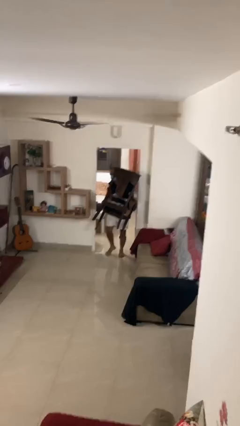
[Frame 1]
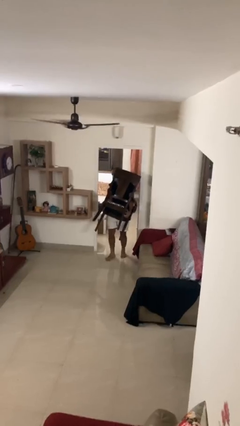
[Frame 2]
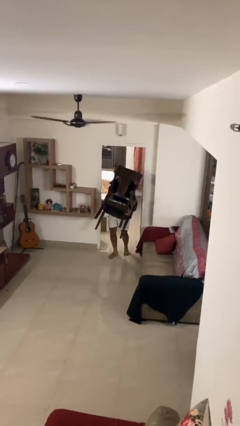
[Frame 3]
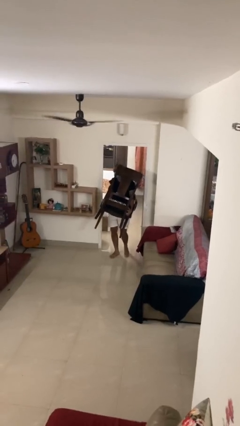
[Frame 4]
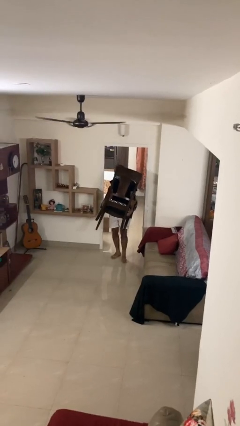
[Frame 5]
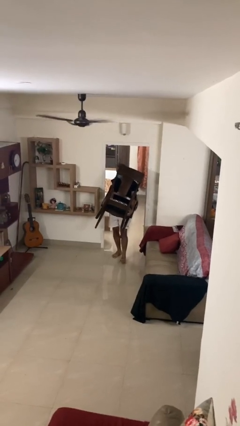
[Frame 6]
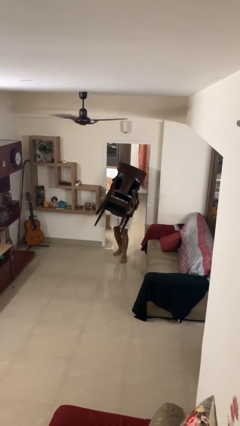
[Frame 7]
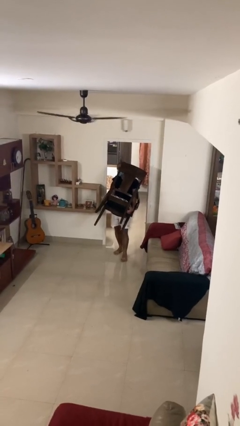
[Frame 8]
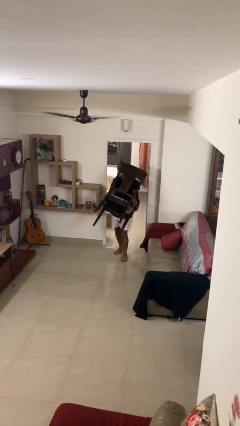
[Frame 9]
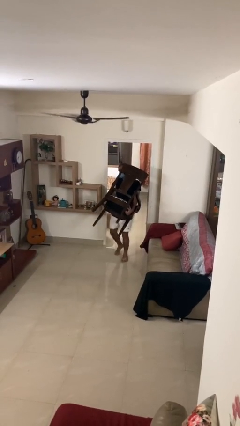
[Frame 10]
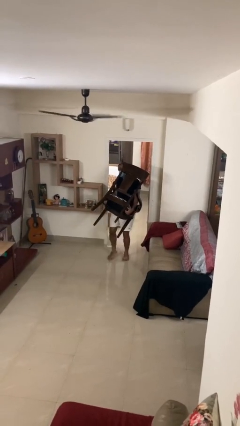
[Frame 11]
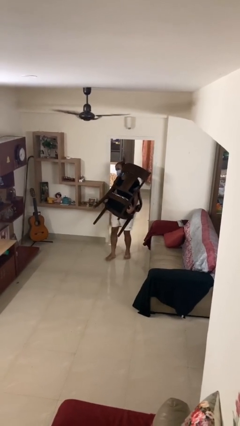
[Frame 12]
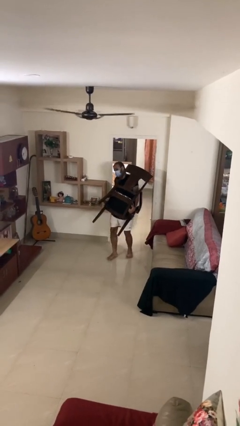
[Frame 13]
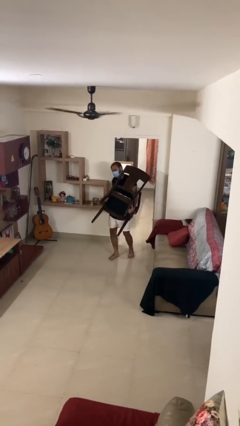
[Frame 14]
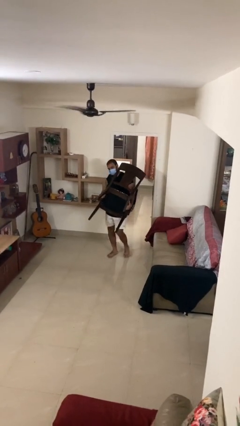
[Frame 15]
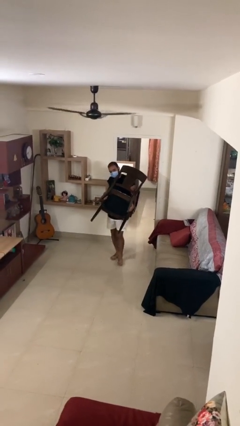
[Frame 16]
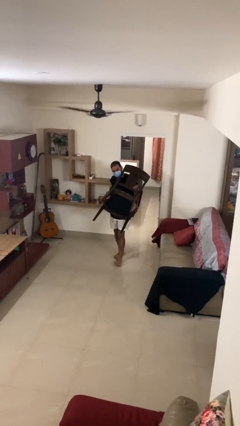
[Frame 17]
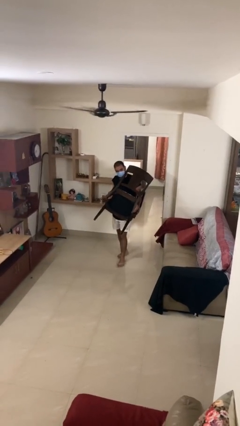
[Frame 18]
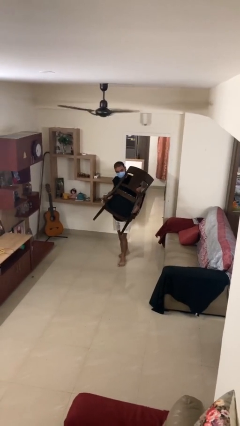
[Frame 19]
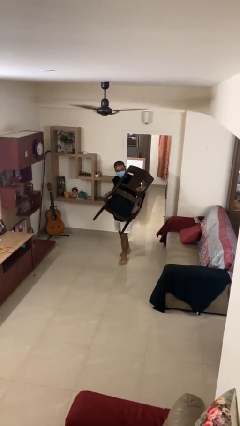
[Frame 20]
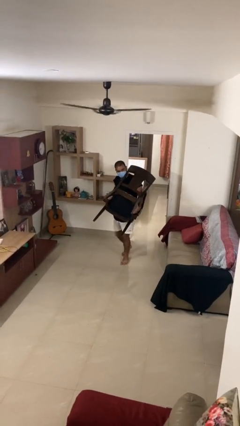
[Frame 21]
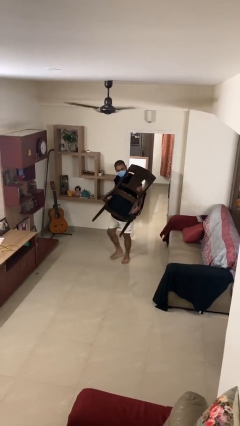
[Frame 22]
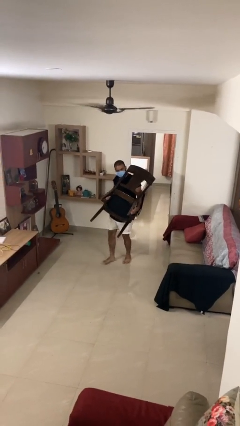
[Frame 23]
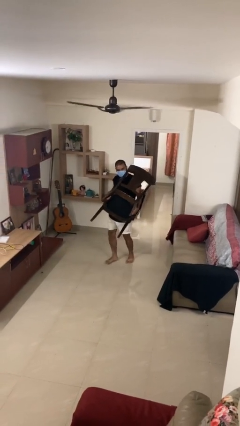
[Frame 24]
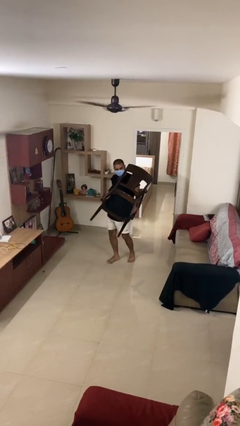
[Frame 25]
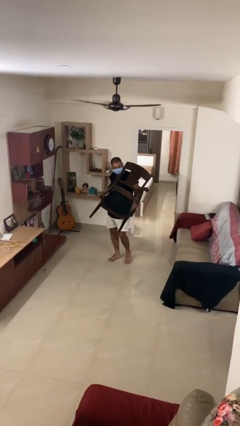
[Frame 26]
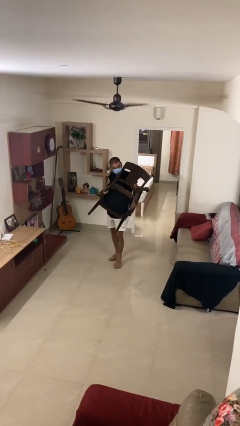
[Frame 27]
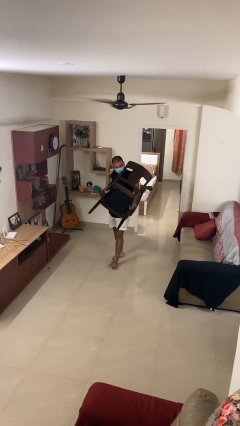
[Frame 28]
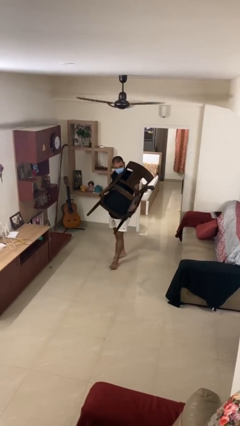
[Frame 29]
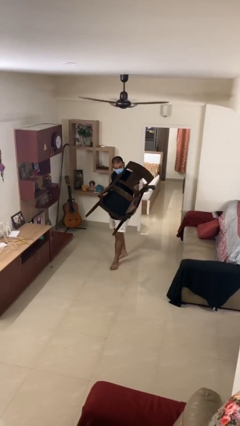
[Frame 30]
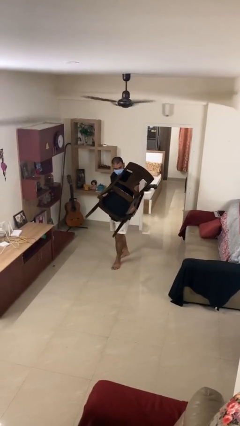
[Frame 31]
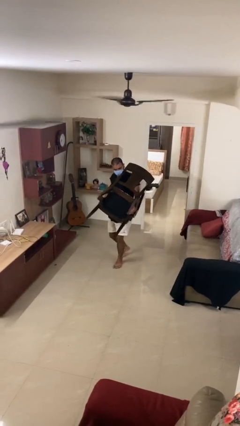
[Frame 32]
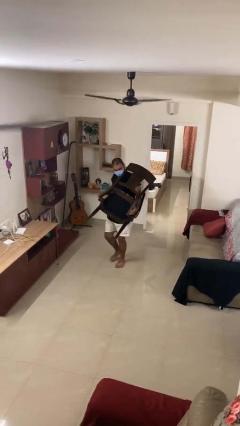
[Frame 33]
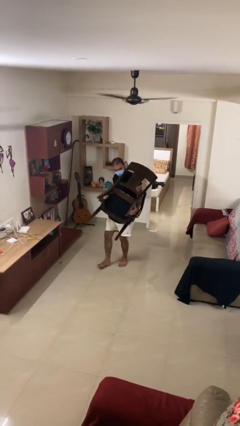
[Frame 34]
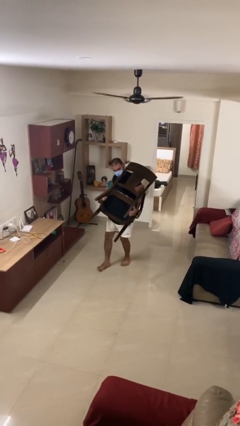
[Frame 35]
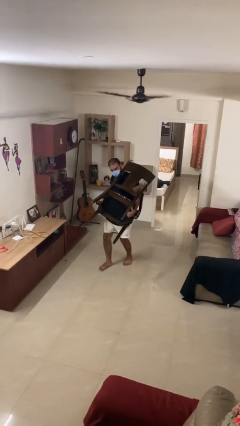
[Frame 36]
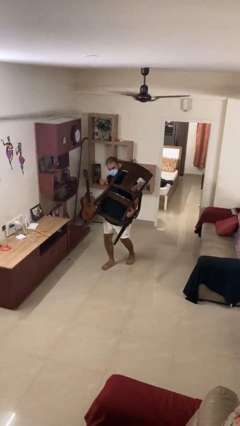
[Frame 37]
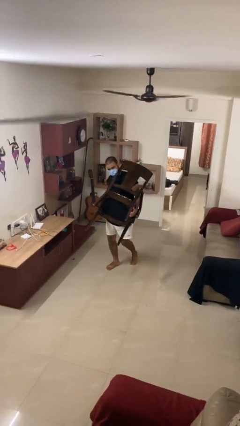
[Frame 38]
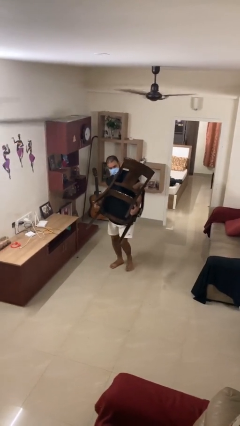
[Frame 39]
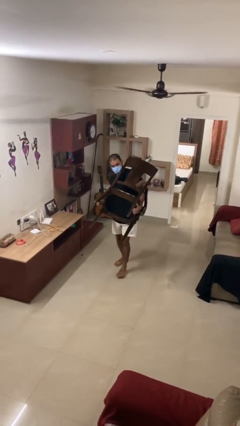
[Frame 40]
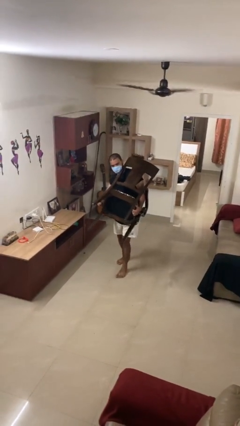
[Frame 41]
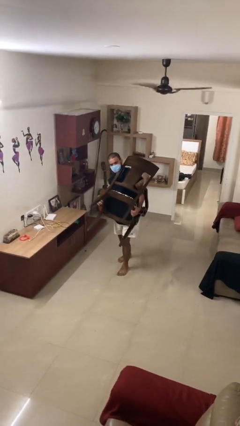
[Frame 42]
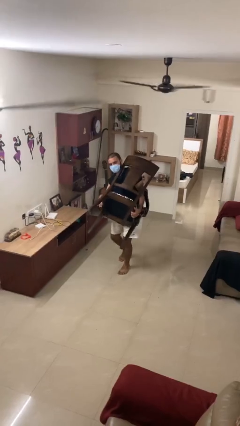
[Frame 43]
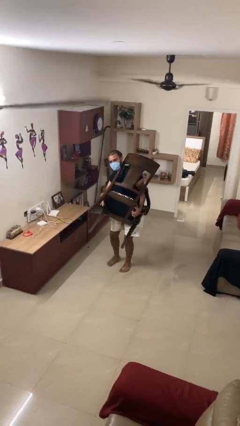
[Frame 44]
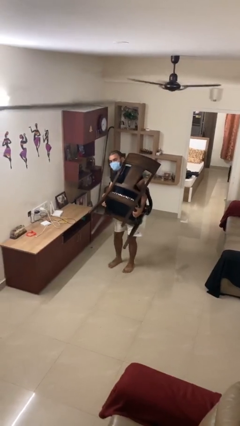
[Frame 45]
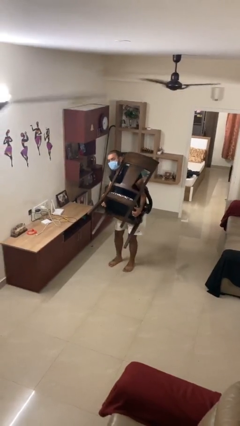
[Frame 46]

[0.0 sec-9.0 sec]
person carries heavy object

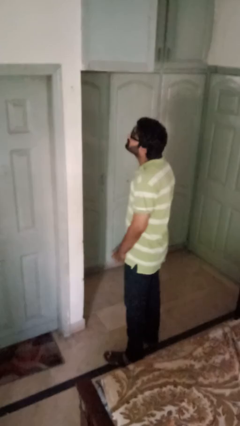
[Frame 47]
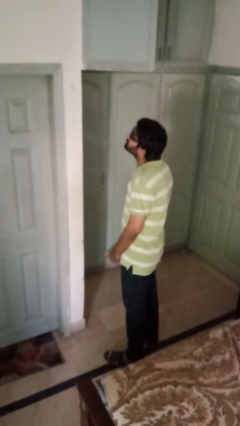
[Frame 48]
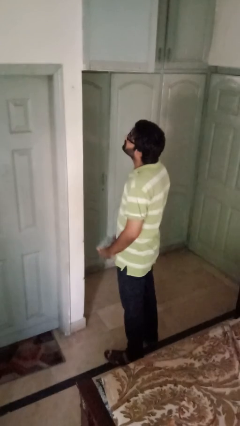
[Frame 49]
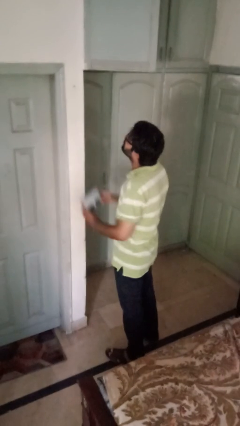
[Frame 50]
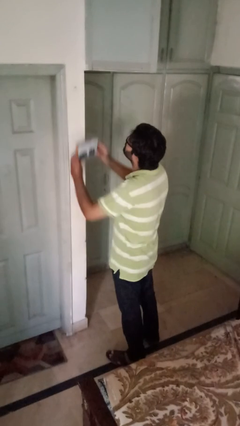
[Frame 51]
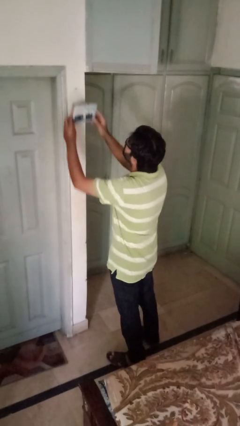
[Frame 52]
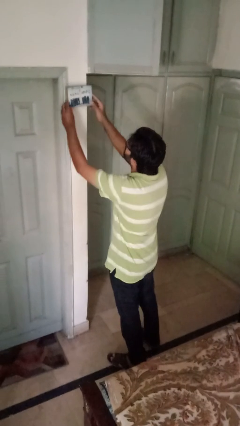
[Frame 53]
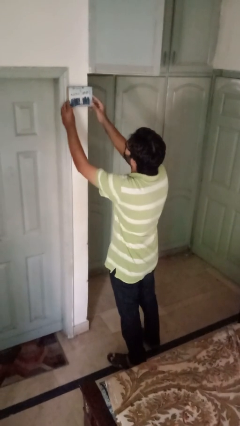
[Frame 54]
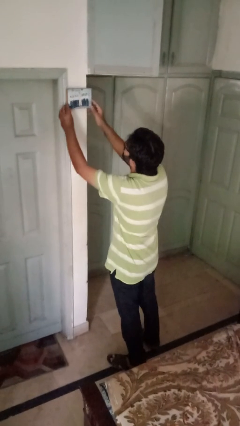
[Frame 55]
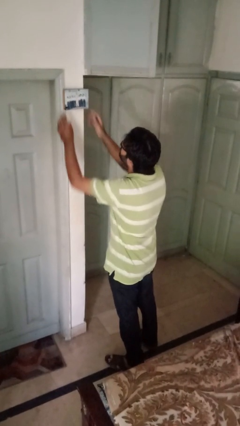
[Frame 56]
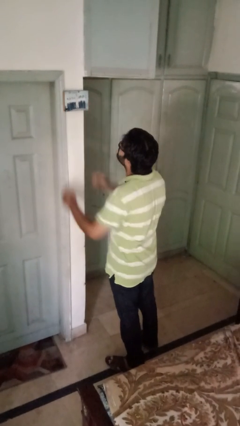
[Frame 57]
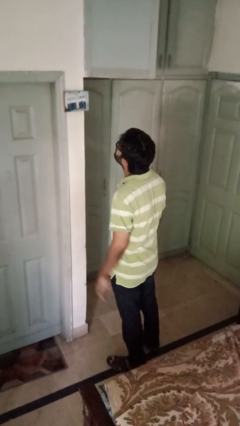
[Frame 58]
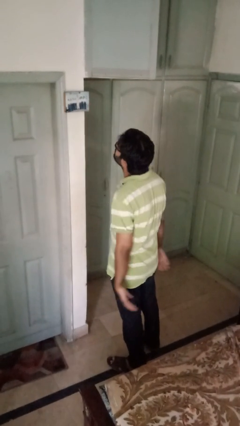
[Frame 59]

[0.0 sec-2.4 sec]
person puts up picture frame

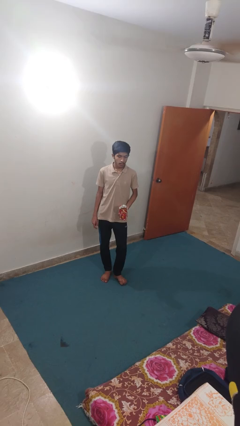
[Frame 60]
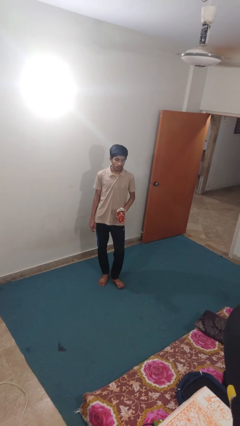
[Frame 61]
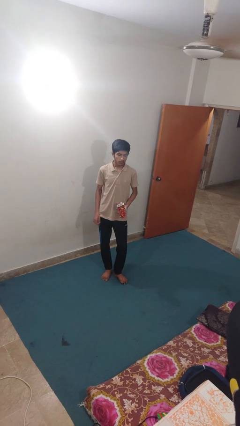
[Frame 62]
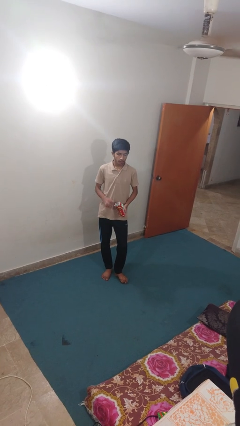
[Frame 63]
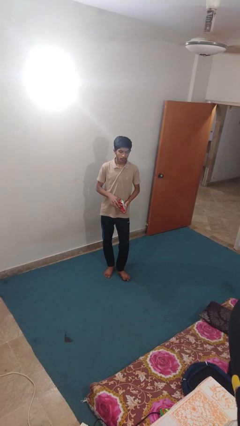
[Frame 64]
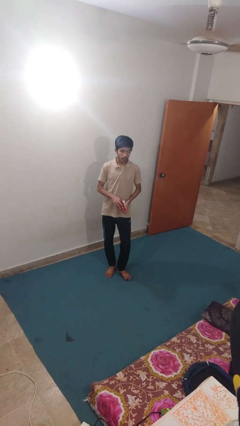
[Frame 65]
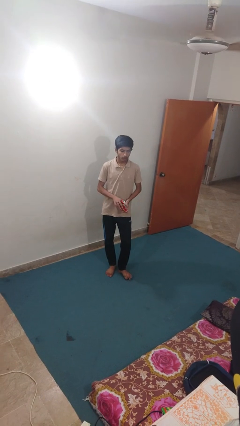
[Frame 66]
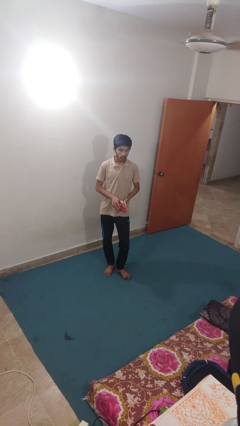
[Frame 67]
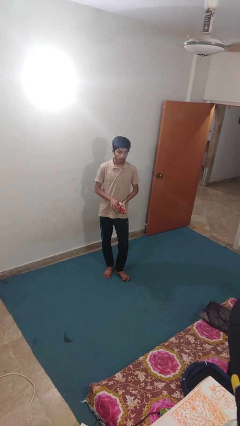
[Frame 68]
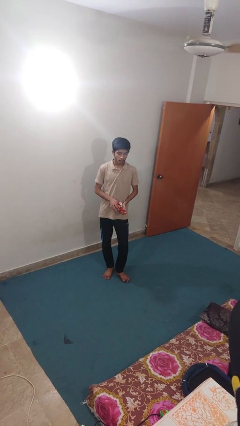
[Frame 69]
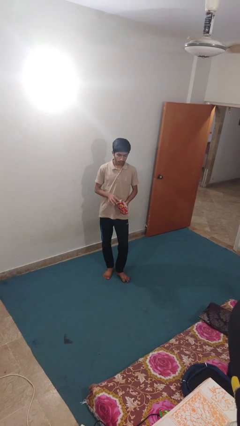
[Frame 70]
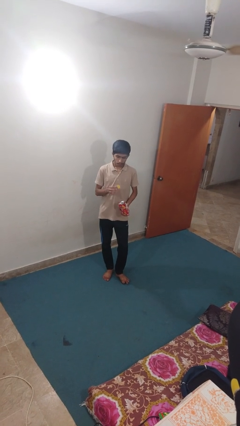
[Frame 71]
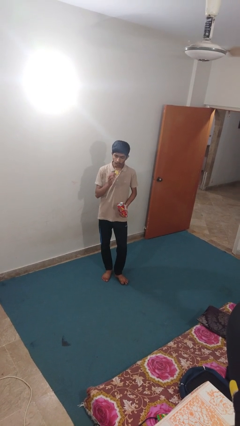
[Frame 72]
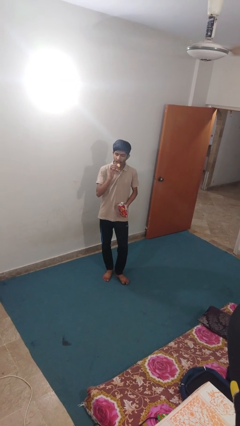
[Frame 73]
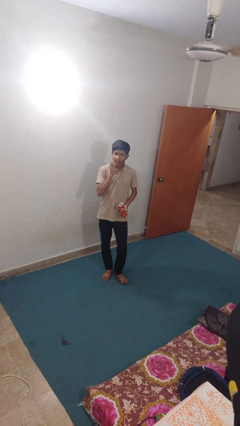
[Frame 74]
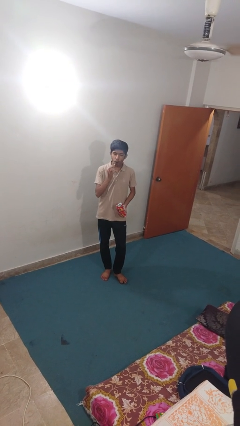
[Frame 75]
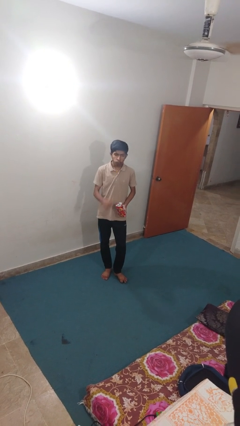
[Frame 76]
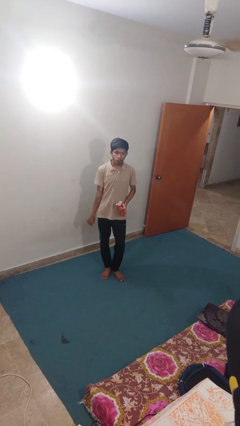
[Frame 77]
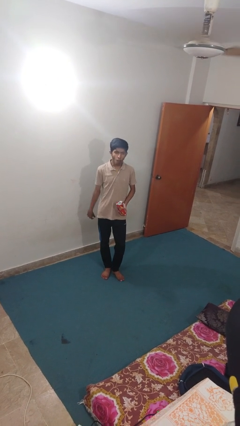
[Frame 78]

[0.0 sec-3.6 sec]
person eats snack from bag

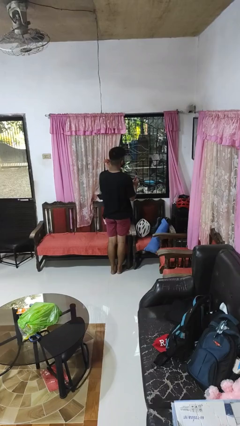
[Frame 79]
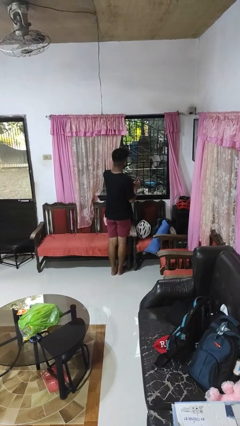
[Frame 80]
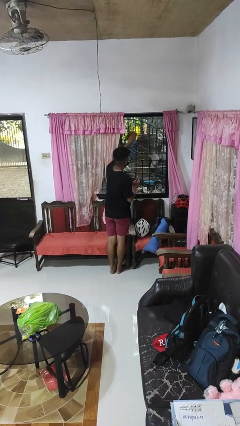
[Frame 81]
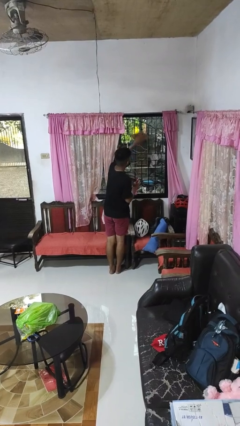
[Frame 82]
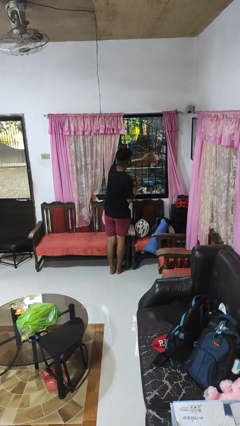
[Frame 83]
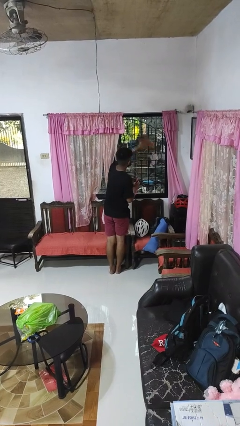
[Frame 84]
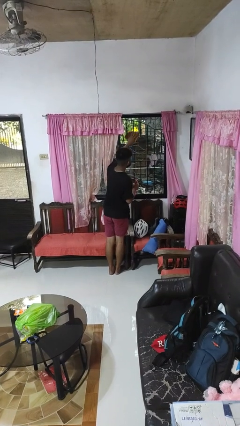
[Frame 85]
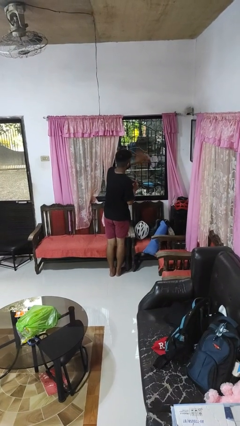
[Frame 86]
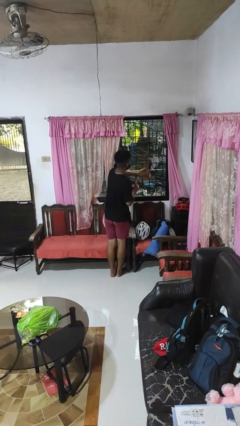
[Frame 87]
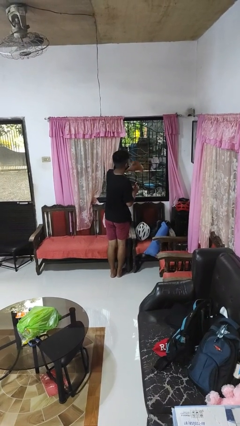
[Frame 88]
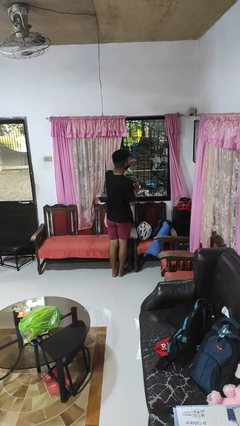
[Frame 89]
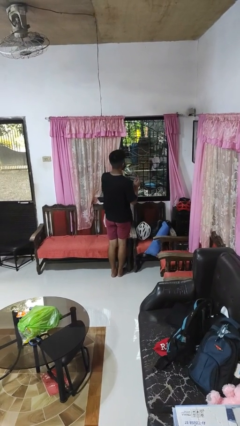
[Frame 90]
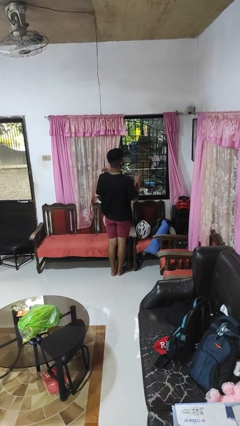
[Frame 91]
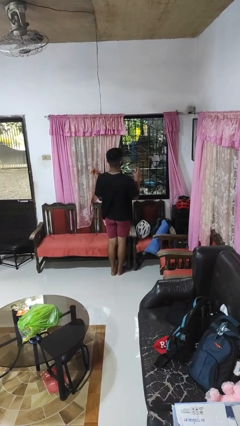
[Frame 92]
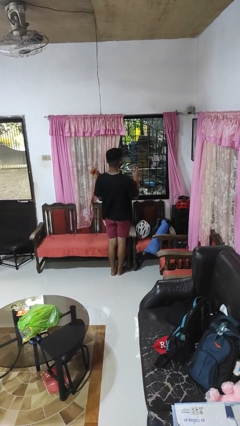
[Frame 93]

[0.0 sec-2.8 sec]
person washes window
